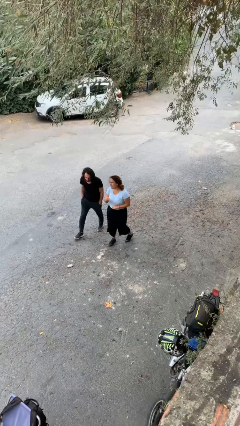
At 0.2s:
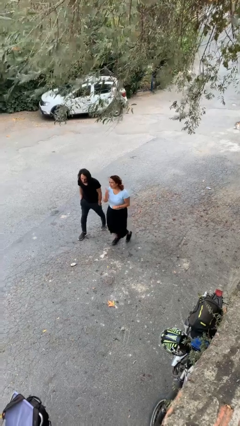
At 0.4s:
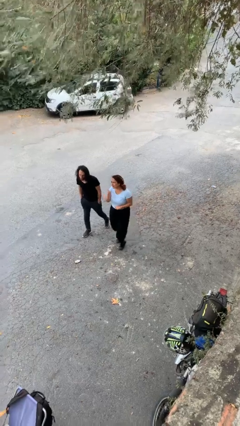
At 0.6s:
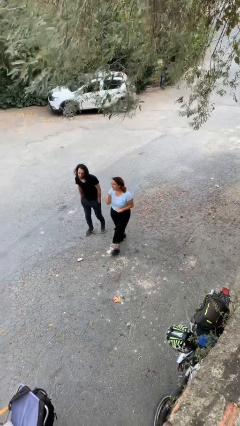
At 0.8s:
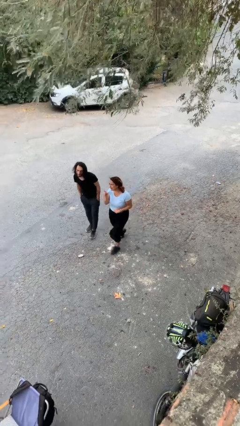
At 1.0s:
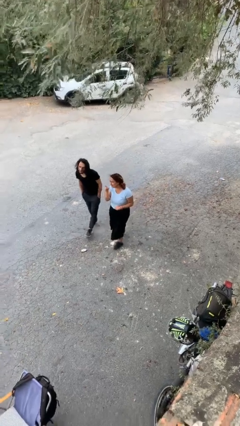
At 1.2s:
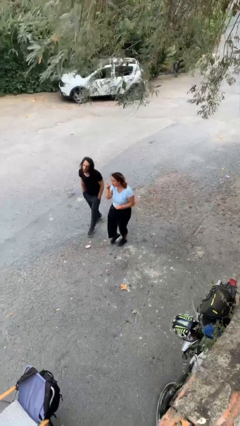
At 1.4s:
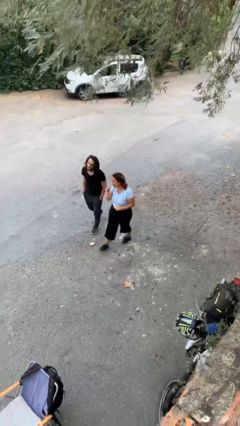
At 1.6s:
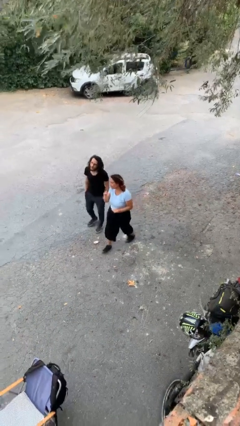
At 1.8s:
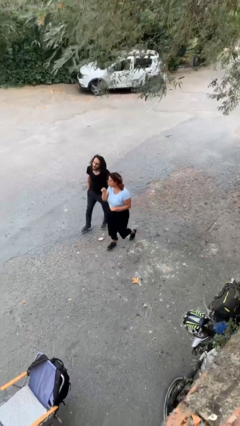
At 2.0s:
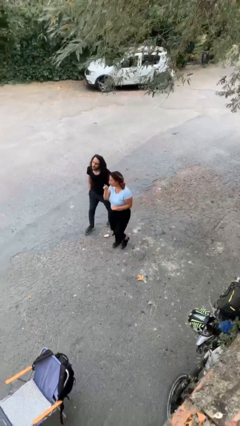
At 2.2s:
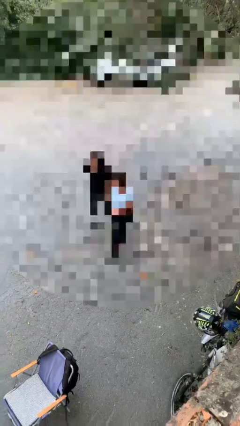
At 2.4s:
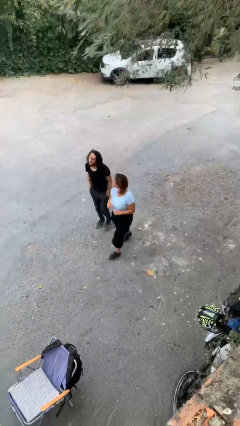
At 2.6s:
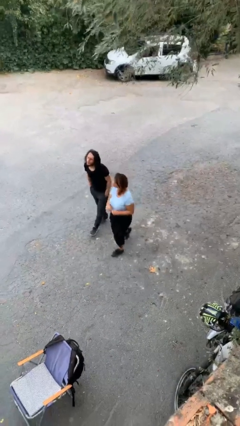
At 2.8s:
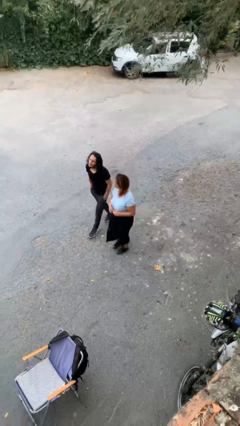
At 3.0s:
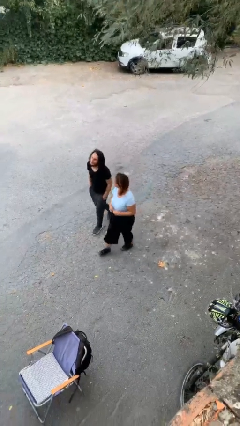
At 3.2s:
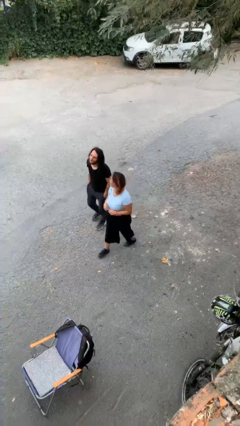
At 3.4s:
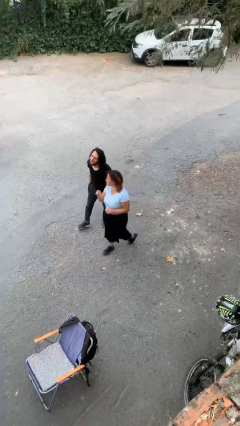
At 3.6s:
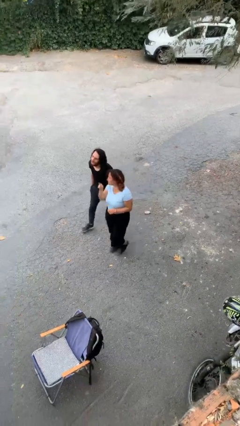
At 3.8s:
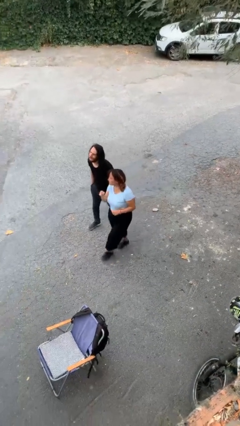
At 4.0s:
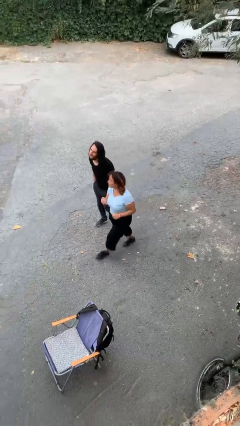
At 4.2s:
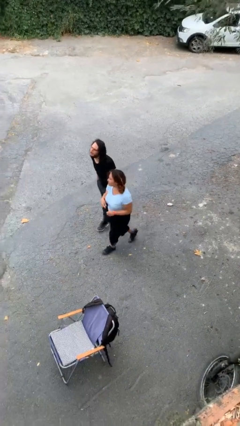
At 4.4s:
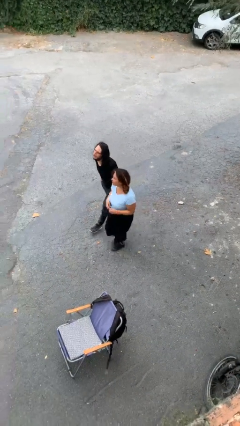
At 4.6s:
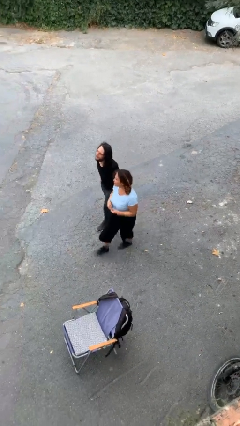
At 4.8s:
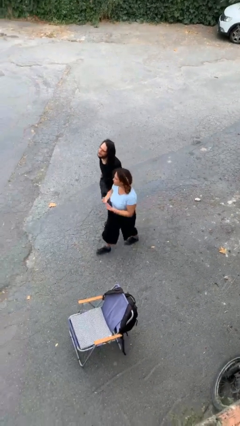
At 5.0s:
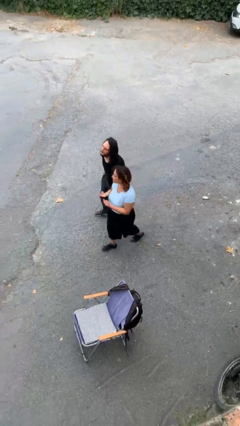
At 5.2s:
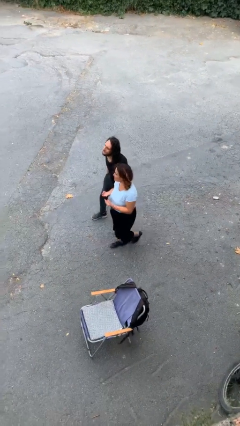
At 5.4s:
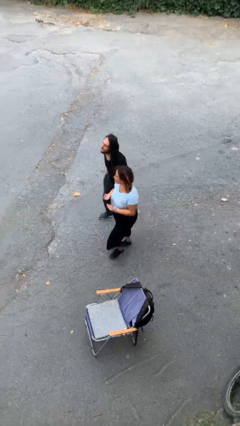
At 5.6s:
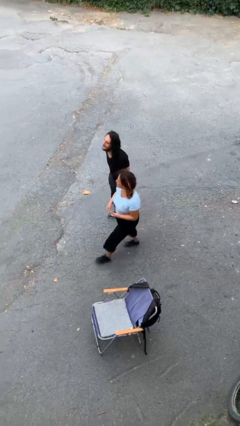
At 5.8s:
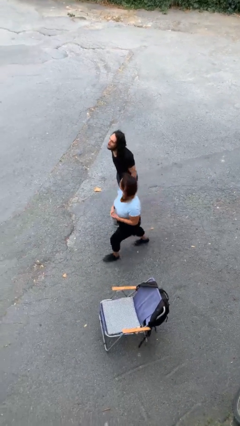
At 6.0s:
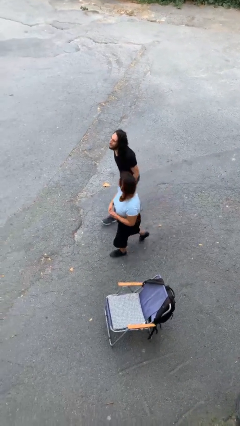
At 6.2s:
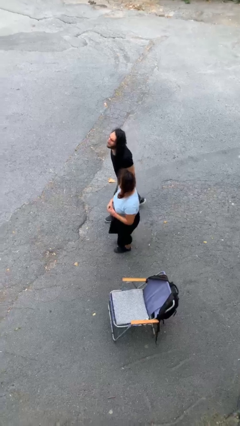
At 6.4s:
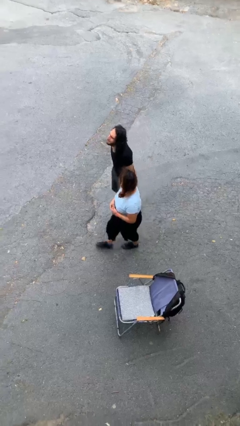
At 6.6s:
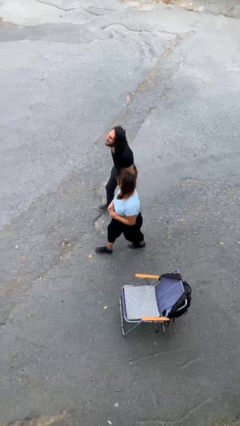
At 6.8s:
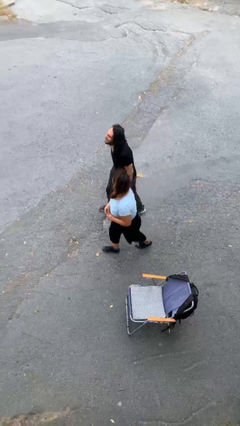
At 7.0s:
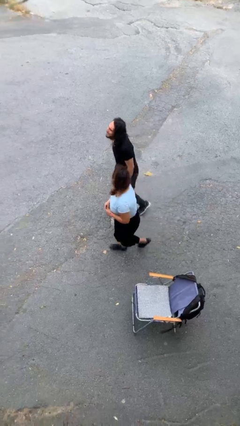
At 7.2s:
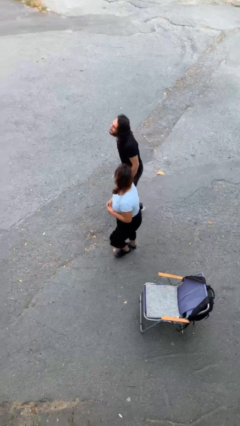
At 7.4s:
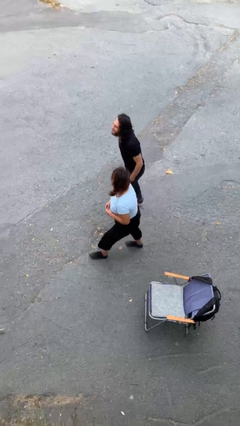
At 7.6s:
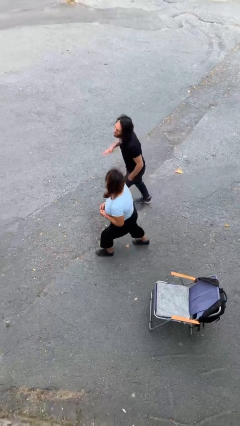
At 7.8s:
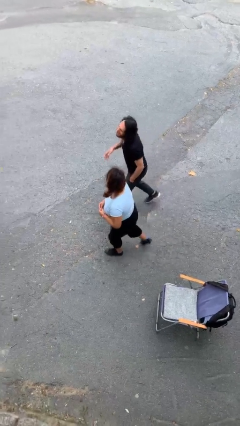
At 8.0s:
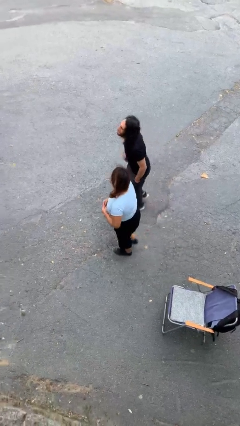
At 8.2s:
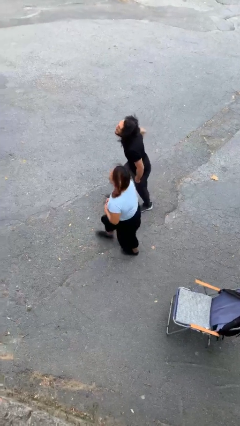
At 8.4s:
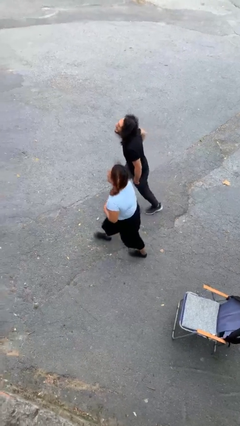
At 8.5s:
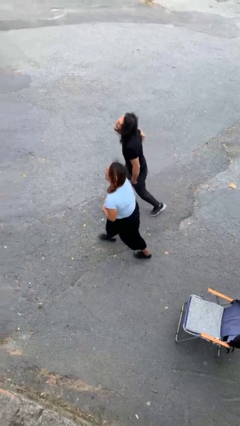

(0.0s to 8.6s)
person talks to person

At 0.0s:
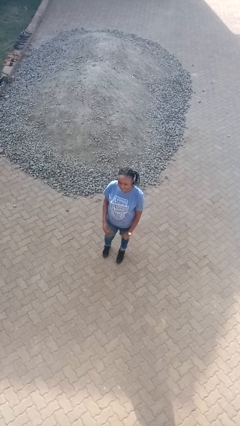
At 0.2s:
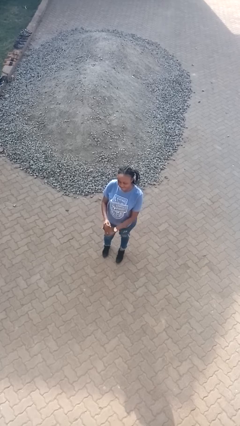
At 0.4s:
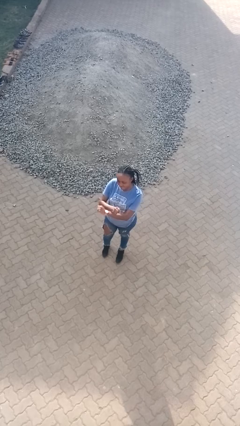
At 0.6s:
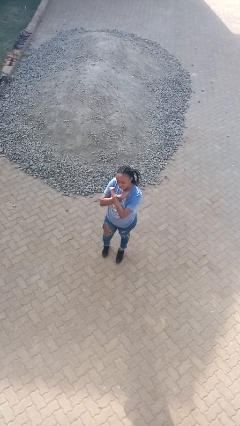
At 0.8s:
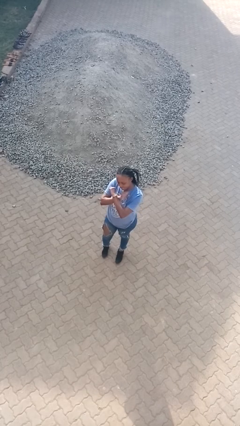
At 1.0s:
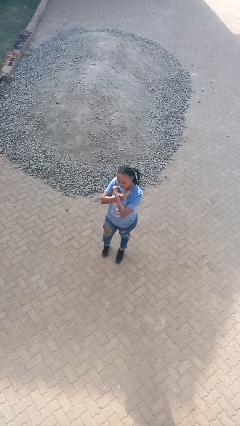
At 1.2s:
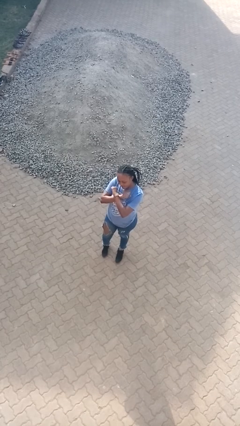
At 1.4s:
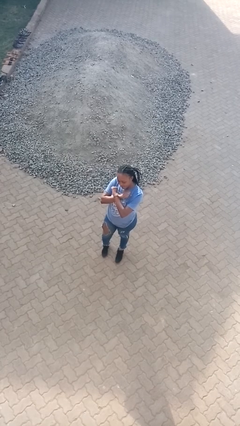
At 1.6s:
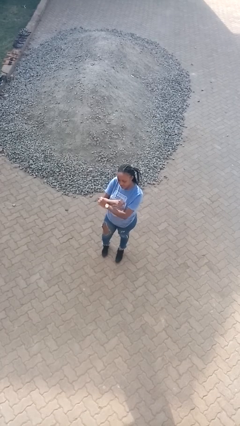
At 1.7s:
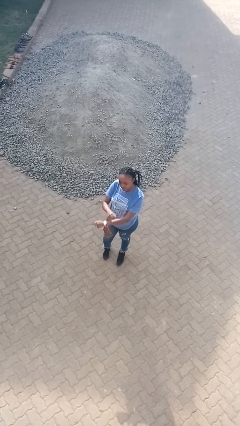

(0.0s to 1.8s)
person gestures arms x

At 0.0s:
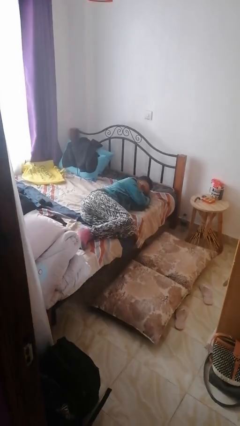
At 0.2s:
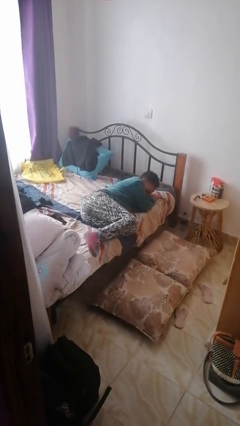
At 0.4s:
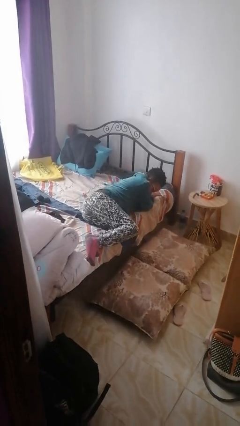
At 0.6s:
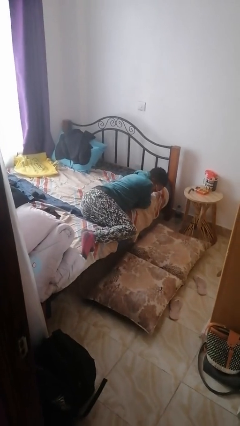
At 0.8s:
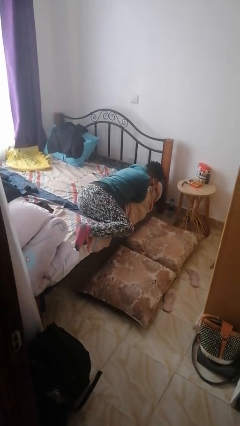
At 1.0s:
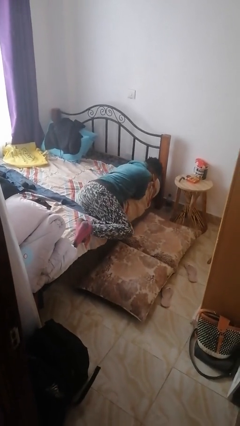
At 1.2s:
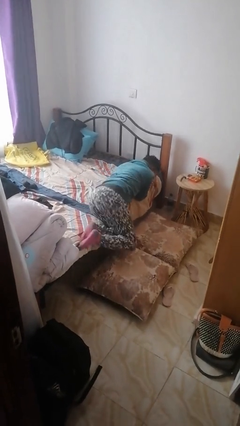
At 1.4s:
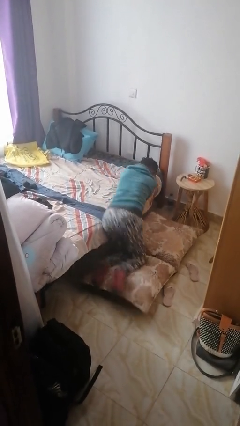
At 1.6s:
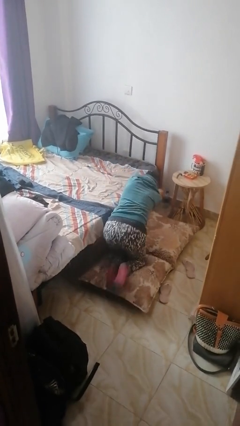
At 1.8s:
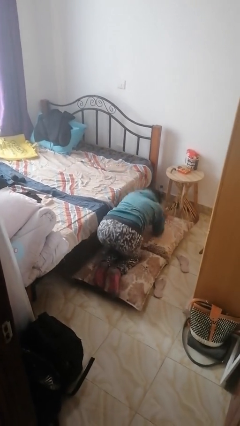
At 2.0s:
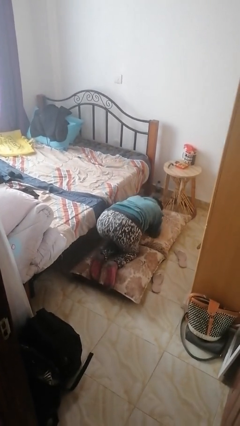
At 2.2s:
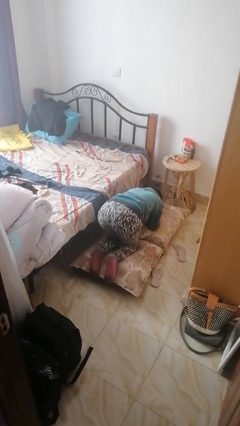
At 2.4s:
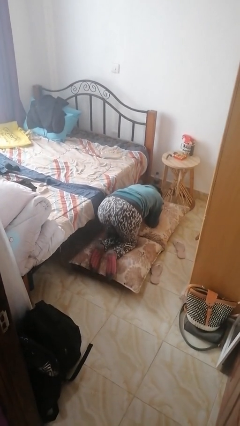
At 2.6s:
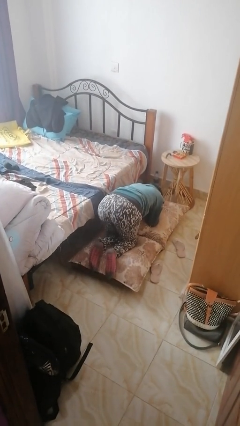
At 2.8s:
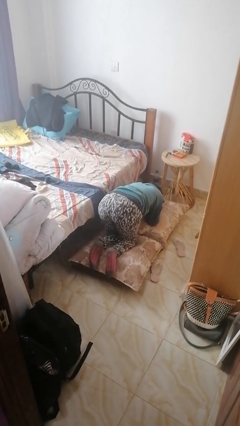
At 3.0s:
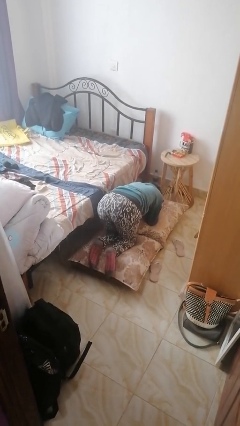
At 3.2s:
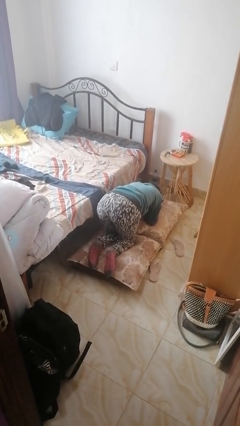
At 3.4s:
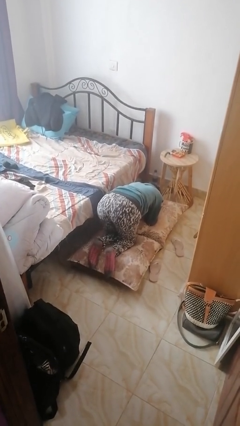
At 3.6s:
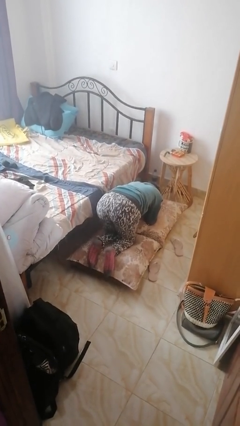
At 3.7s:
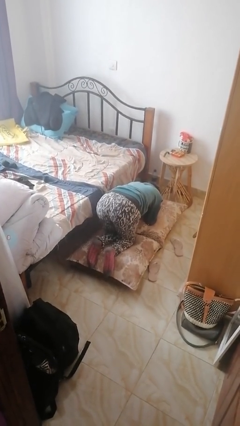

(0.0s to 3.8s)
person falls from bed

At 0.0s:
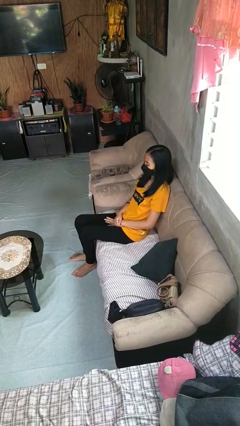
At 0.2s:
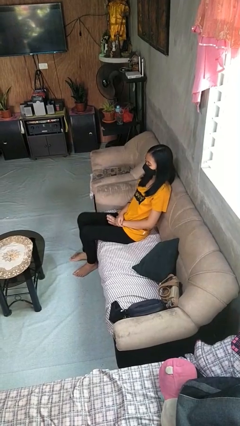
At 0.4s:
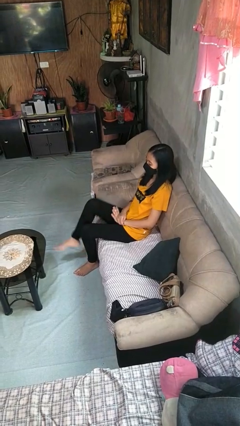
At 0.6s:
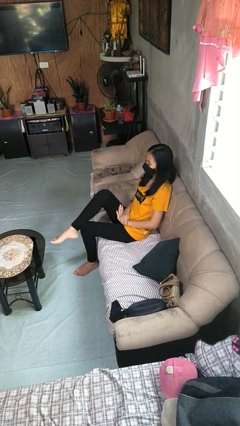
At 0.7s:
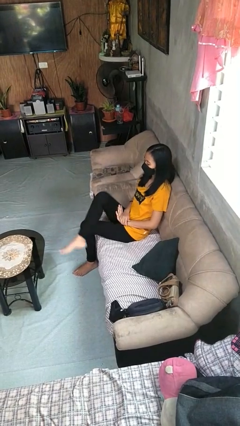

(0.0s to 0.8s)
person crosses legs

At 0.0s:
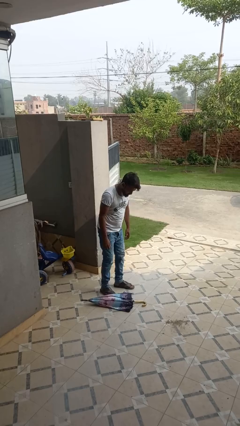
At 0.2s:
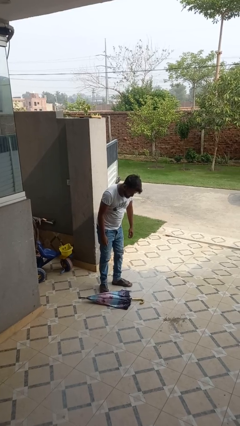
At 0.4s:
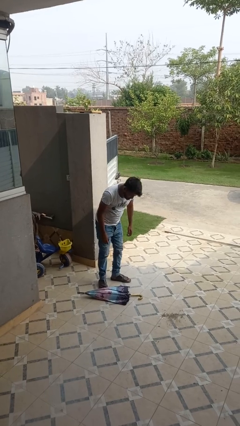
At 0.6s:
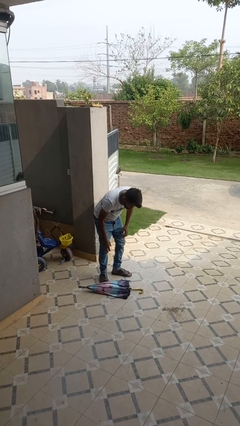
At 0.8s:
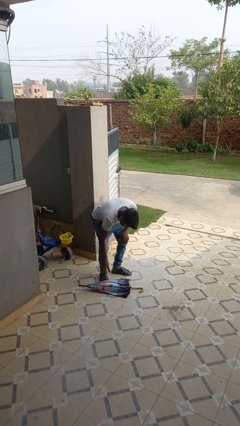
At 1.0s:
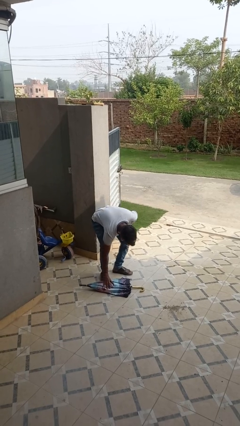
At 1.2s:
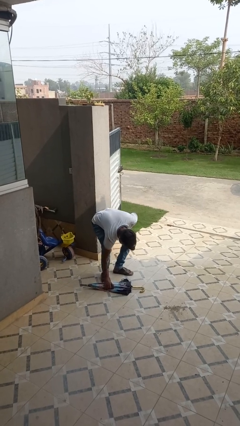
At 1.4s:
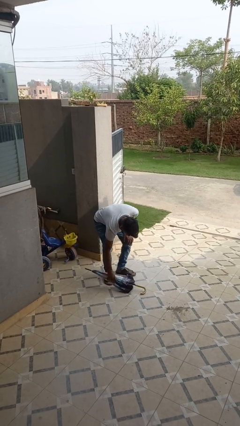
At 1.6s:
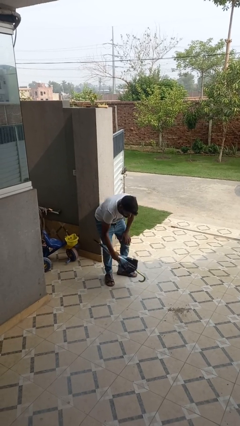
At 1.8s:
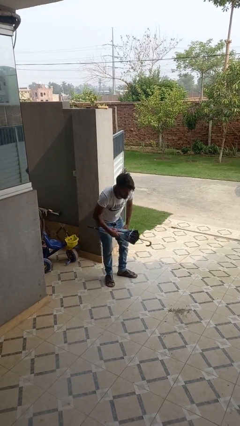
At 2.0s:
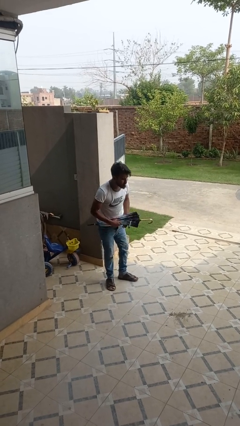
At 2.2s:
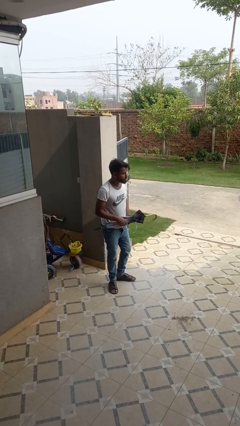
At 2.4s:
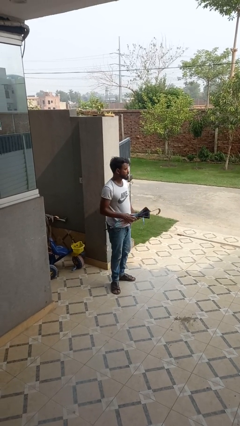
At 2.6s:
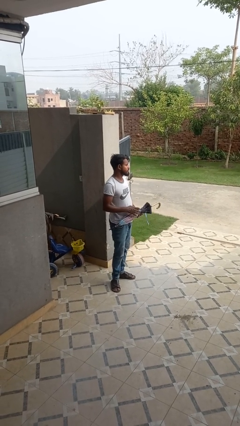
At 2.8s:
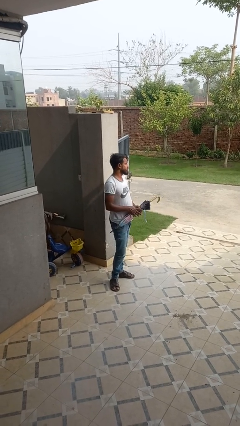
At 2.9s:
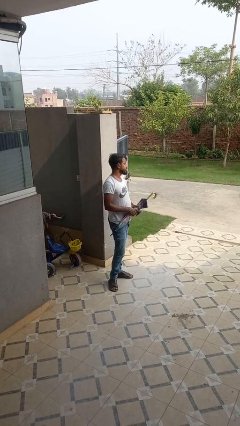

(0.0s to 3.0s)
person picks up object from floor
